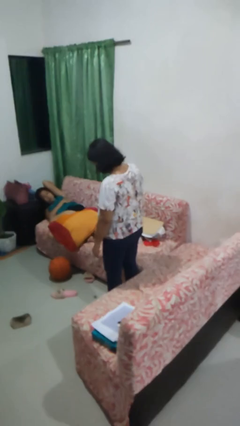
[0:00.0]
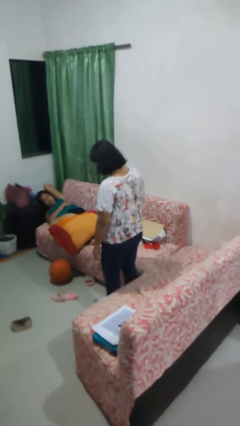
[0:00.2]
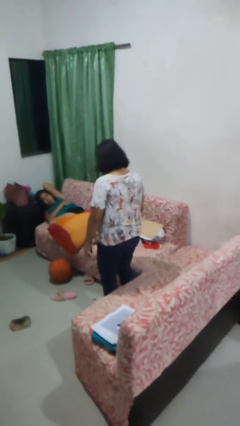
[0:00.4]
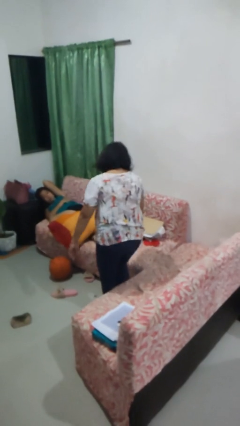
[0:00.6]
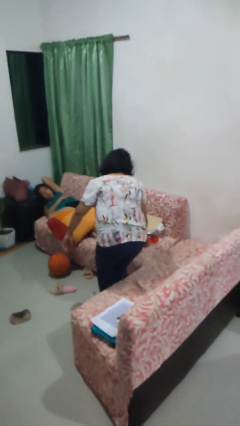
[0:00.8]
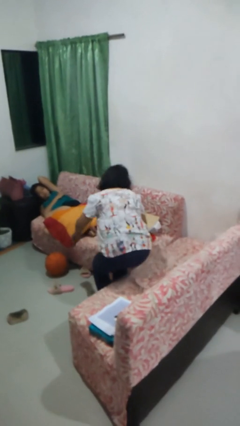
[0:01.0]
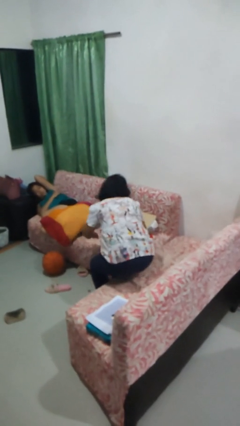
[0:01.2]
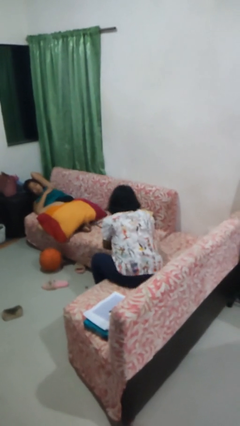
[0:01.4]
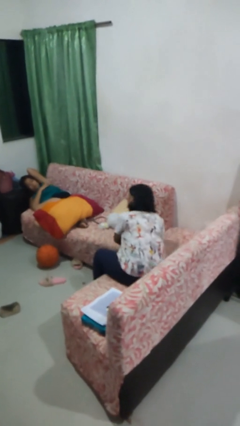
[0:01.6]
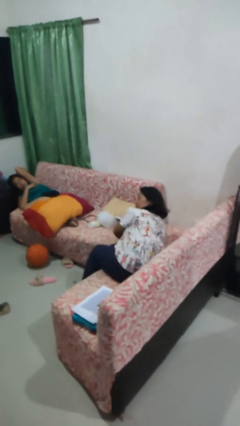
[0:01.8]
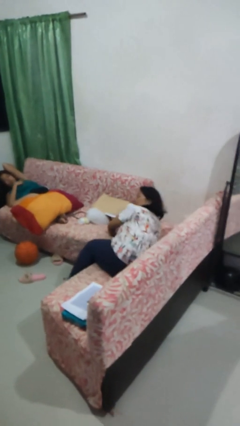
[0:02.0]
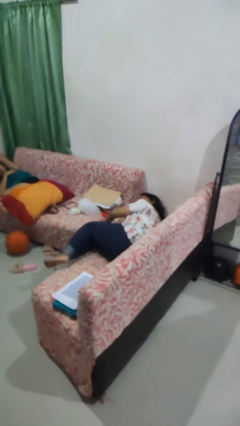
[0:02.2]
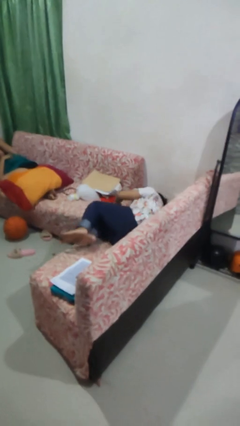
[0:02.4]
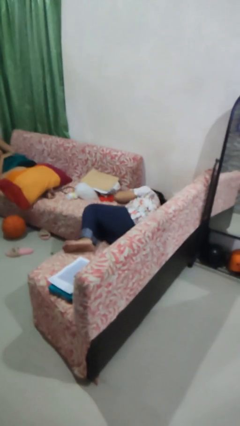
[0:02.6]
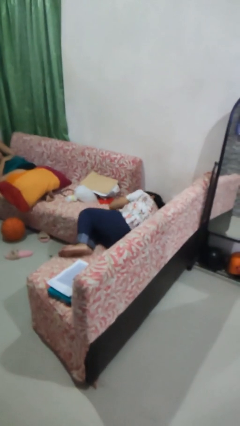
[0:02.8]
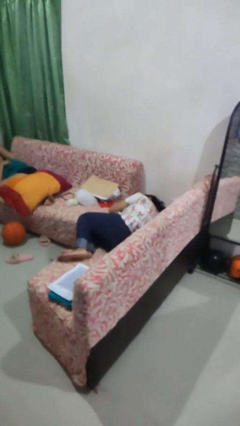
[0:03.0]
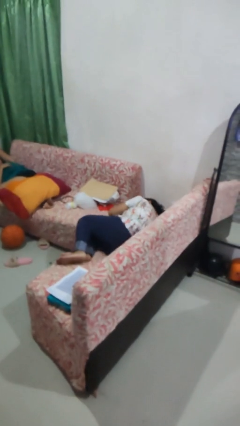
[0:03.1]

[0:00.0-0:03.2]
person lies down on couch

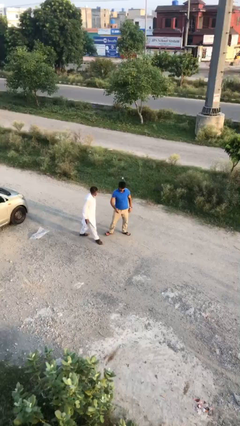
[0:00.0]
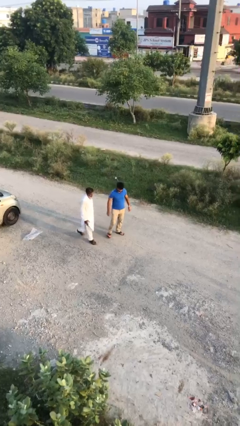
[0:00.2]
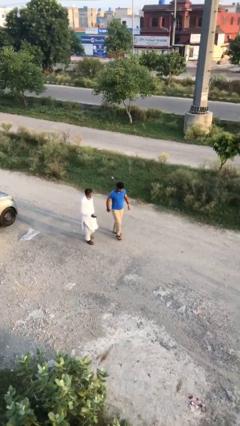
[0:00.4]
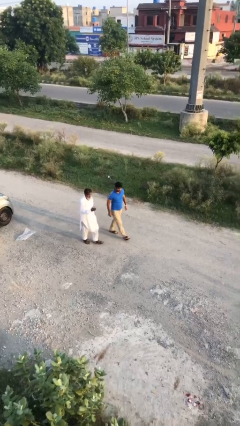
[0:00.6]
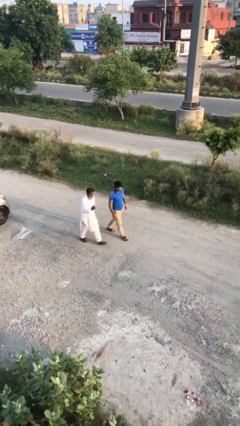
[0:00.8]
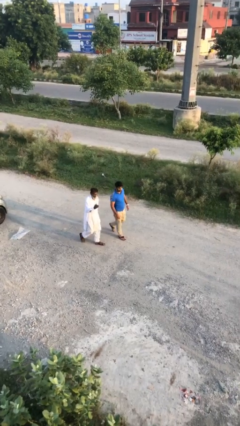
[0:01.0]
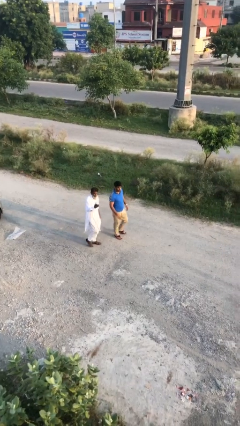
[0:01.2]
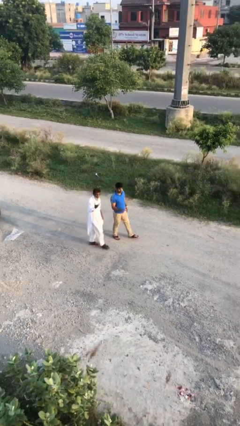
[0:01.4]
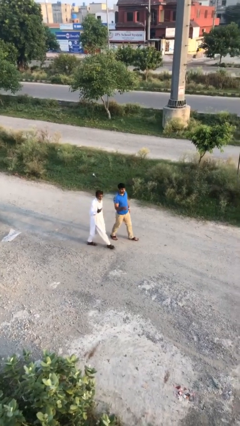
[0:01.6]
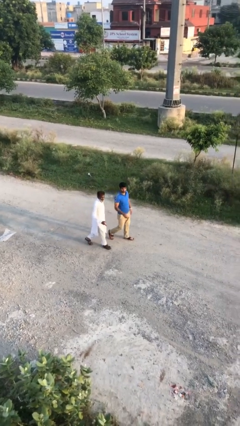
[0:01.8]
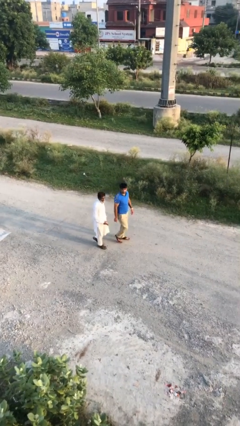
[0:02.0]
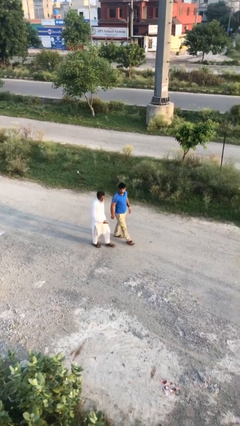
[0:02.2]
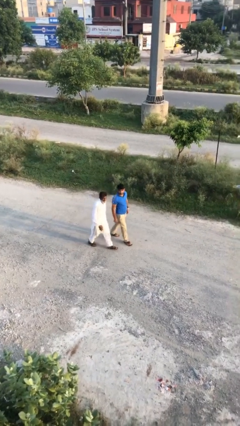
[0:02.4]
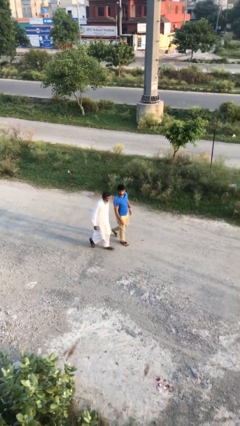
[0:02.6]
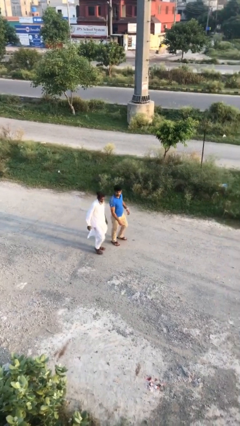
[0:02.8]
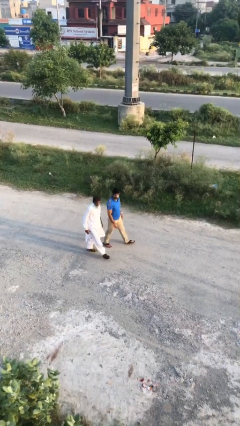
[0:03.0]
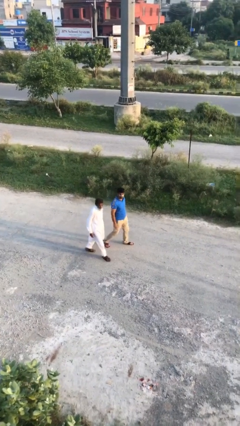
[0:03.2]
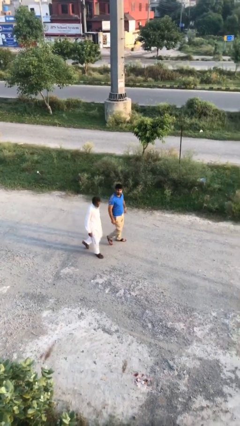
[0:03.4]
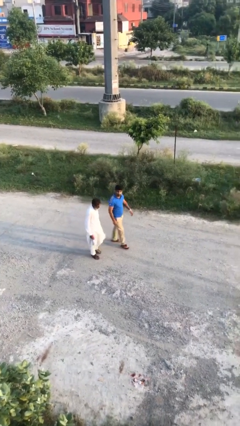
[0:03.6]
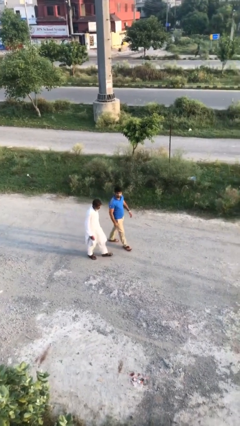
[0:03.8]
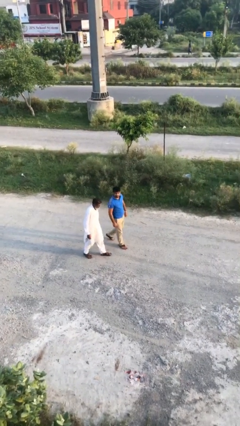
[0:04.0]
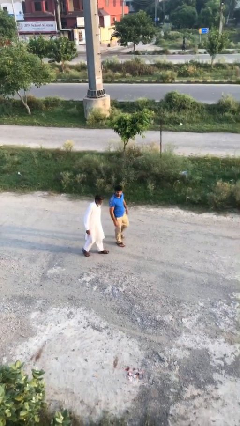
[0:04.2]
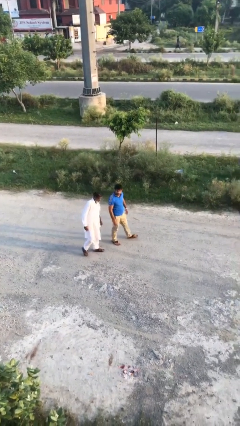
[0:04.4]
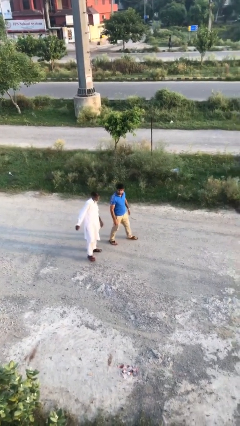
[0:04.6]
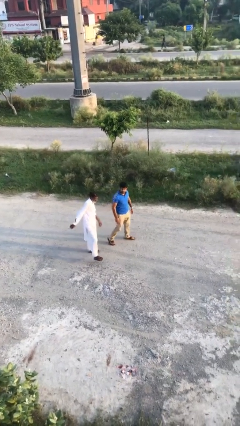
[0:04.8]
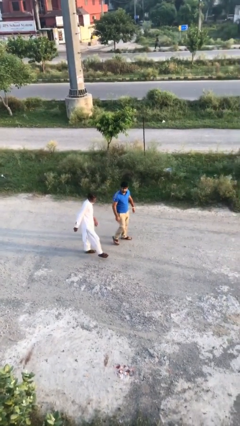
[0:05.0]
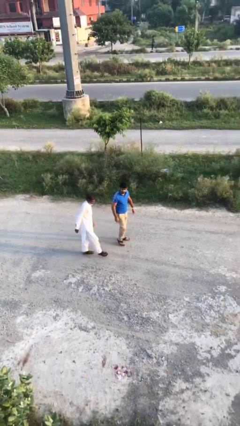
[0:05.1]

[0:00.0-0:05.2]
person talks to person

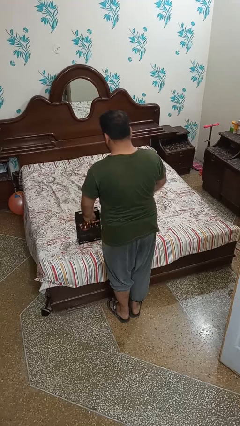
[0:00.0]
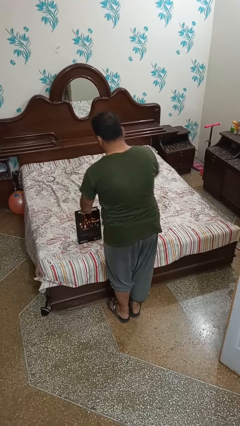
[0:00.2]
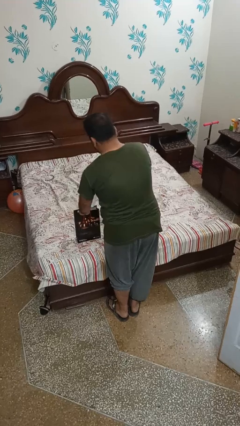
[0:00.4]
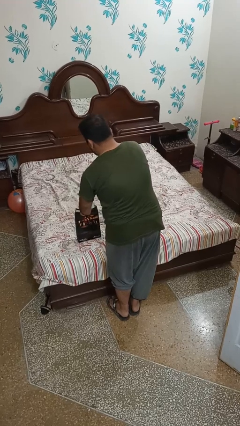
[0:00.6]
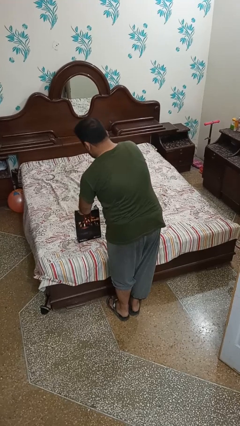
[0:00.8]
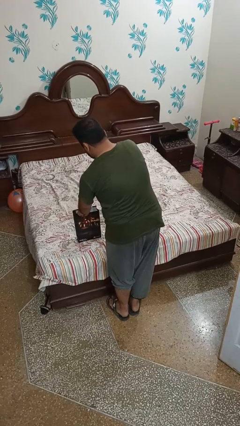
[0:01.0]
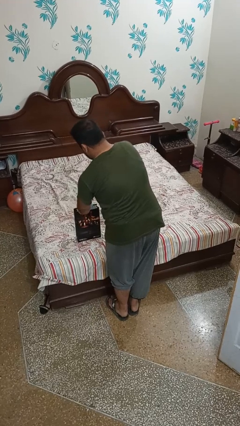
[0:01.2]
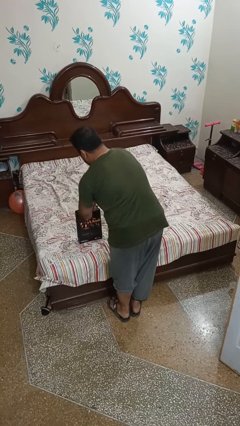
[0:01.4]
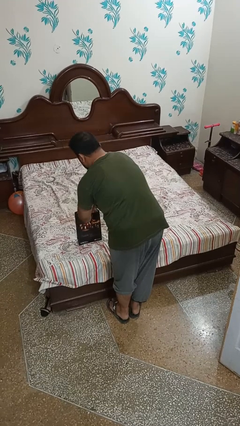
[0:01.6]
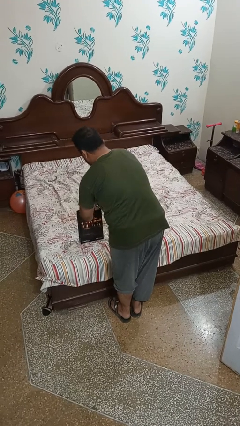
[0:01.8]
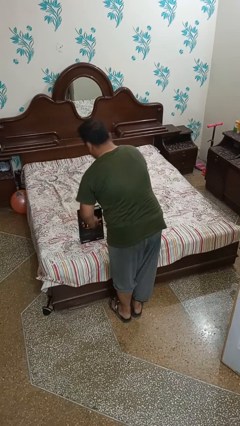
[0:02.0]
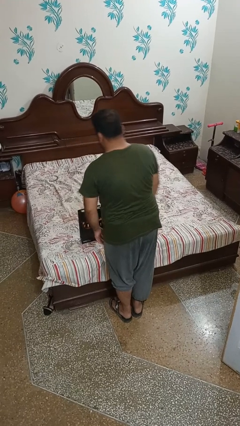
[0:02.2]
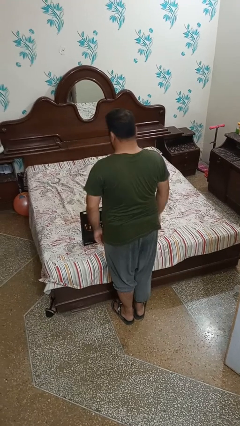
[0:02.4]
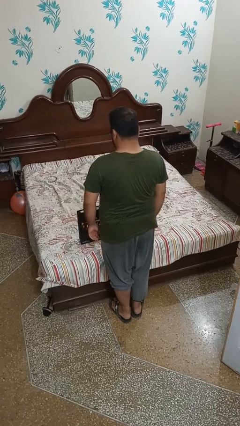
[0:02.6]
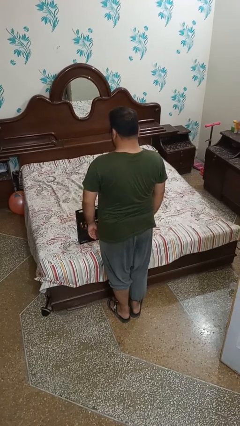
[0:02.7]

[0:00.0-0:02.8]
person puts object into bag

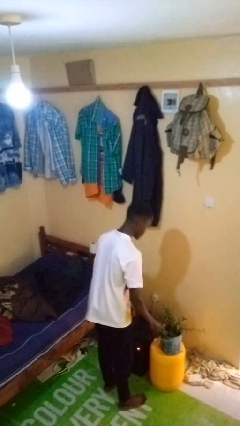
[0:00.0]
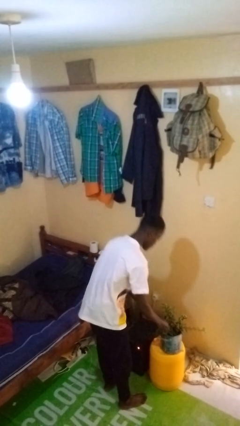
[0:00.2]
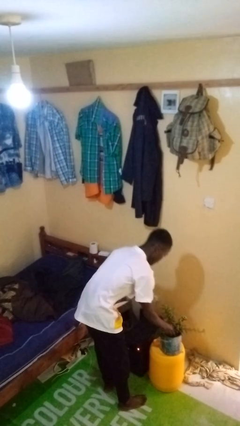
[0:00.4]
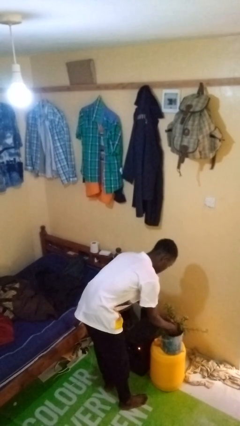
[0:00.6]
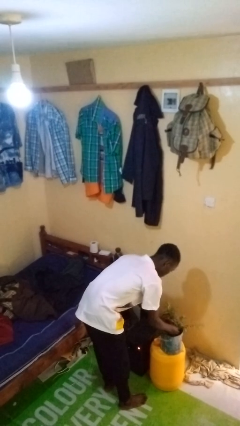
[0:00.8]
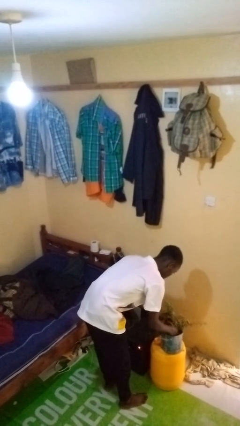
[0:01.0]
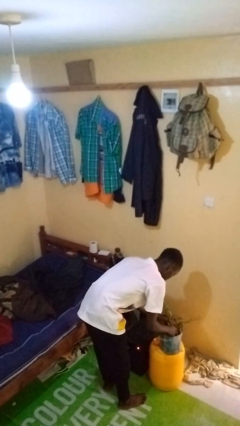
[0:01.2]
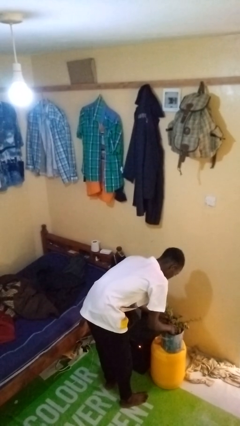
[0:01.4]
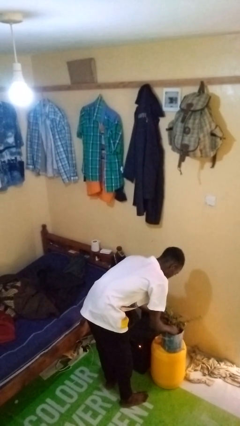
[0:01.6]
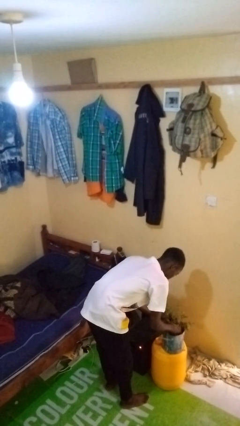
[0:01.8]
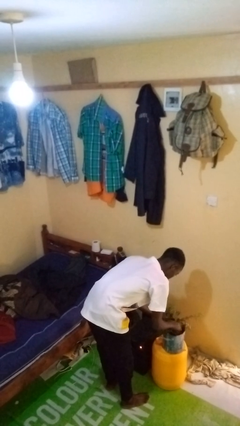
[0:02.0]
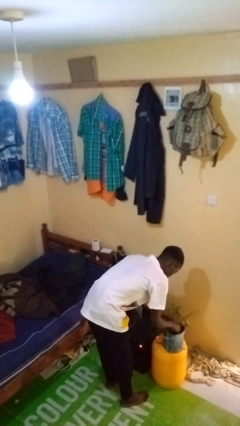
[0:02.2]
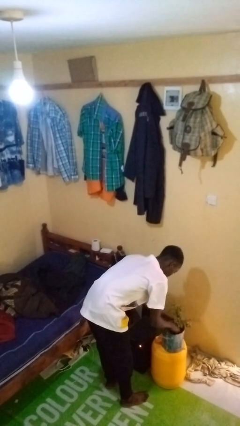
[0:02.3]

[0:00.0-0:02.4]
person arranges flowers in vase

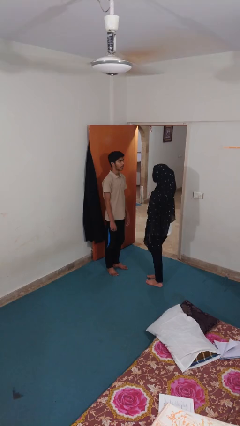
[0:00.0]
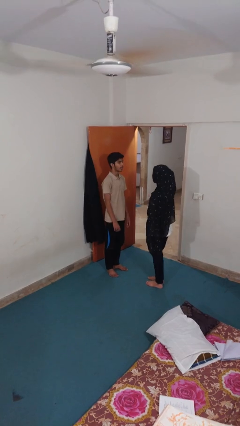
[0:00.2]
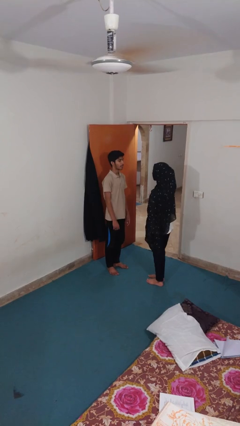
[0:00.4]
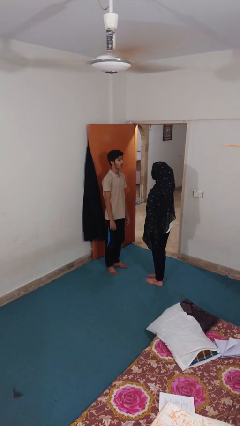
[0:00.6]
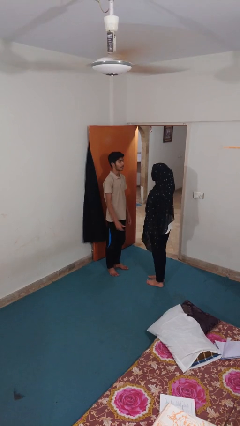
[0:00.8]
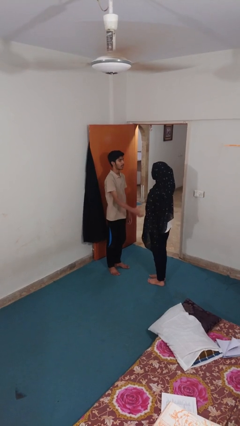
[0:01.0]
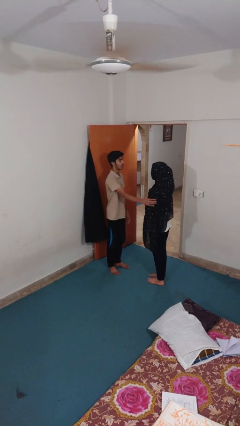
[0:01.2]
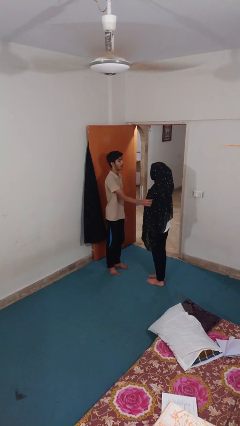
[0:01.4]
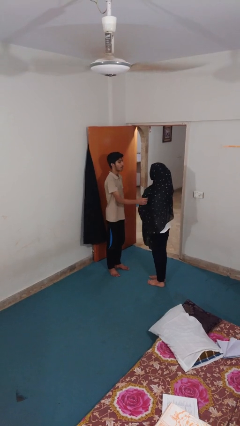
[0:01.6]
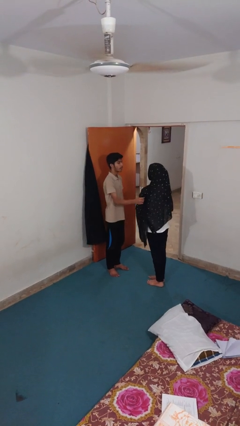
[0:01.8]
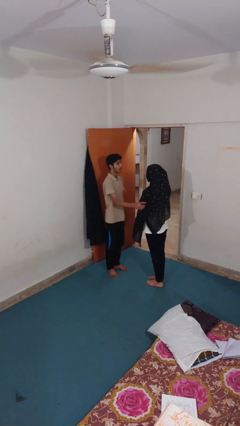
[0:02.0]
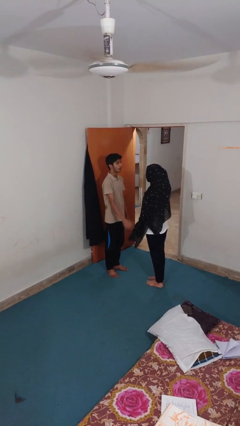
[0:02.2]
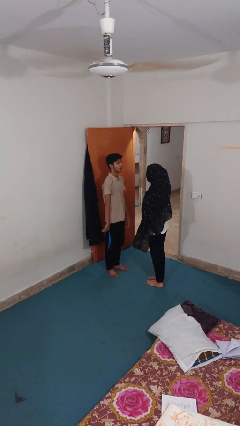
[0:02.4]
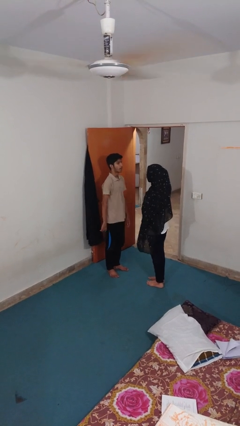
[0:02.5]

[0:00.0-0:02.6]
person grabs person by bicep

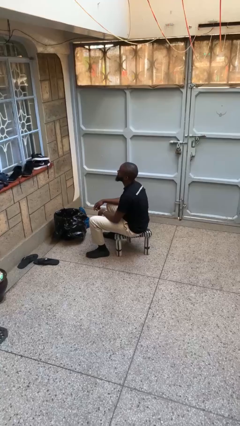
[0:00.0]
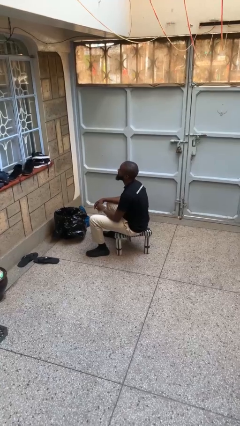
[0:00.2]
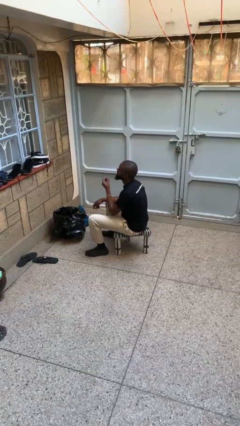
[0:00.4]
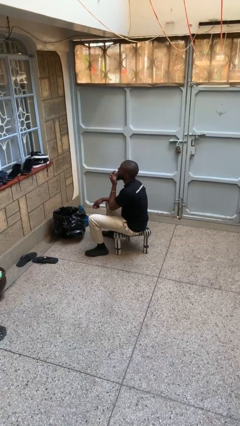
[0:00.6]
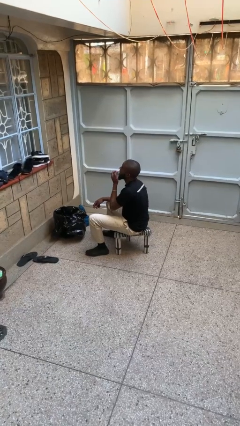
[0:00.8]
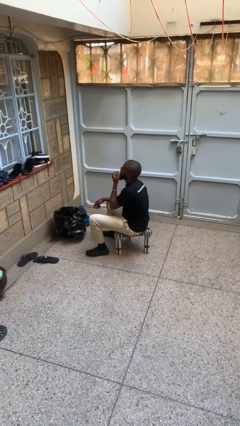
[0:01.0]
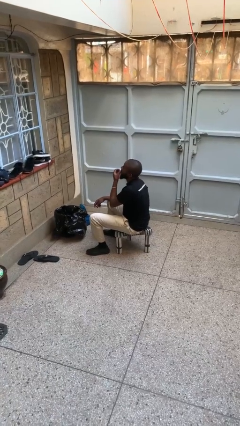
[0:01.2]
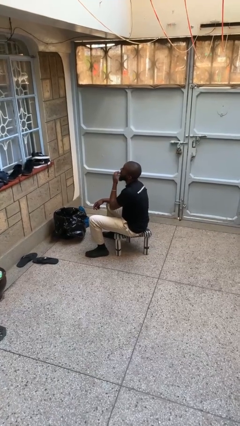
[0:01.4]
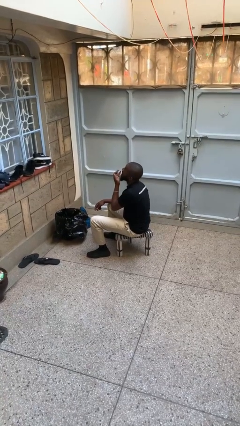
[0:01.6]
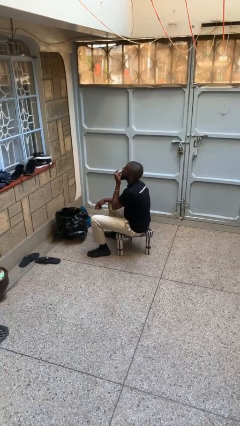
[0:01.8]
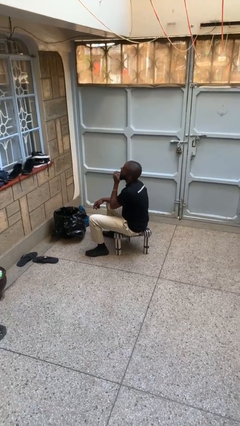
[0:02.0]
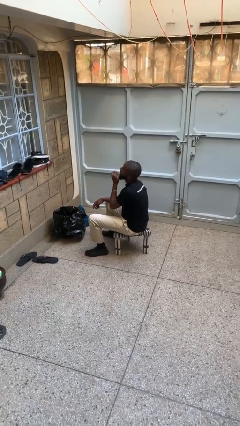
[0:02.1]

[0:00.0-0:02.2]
person licks fingers
